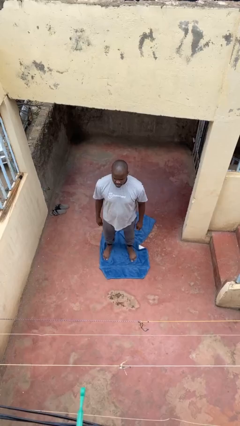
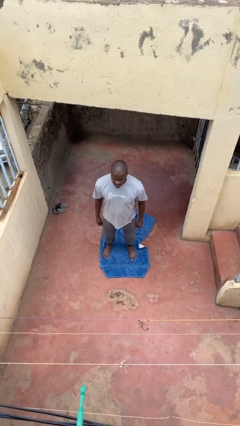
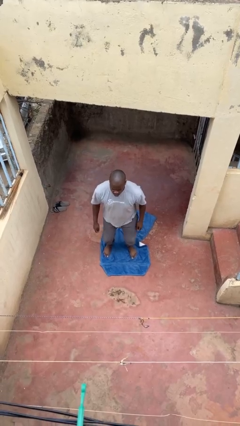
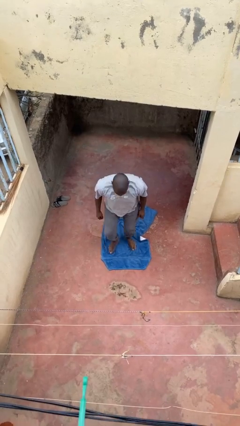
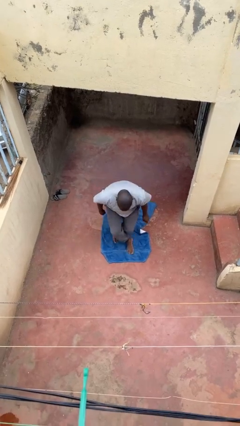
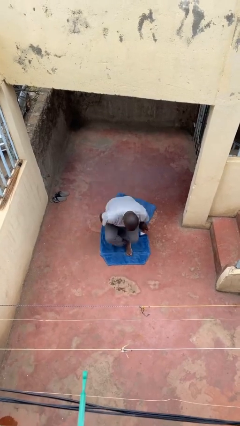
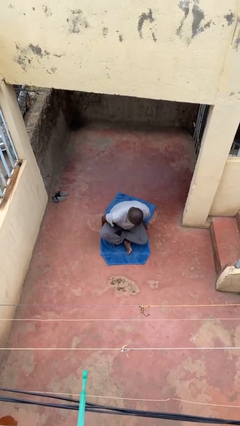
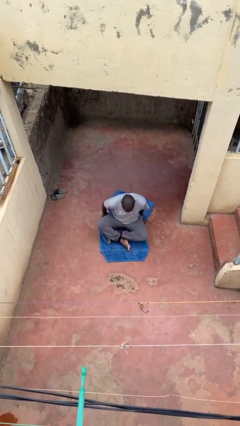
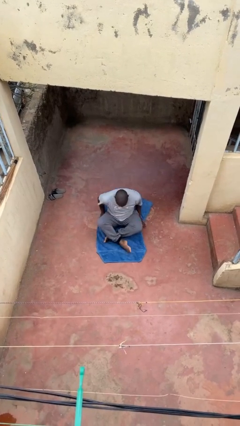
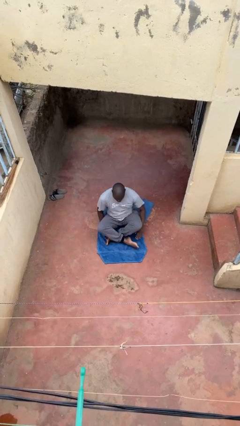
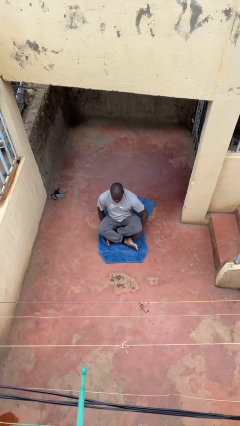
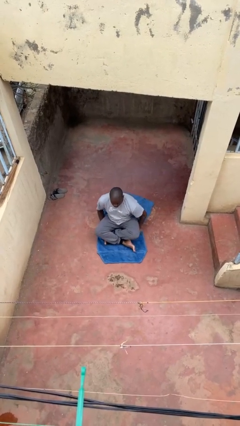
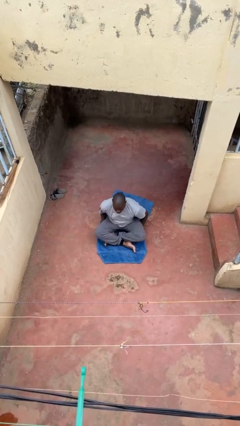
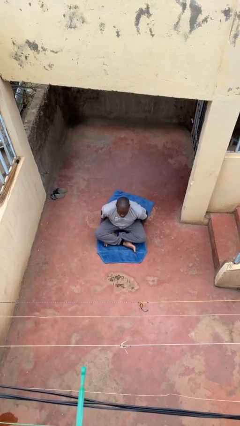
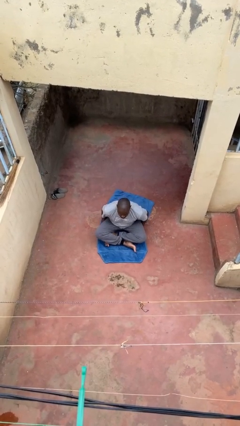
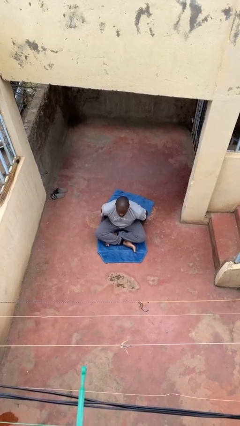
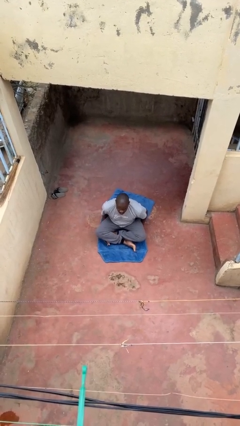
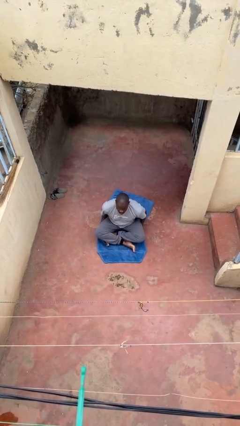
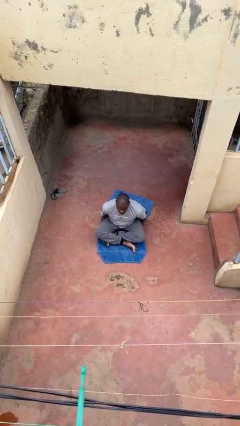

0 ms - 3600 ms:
person sits crisscross

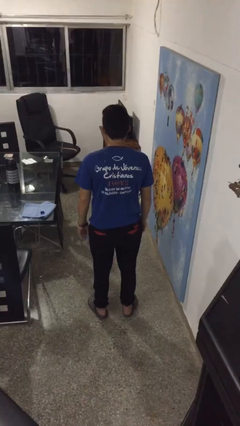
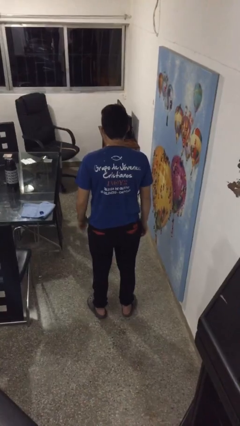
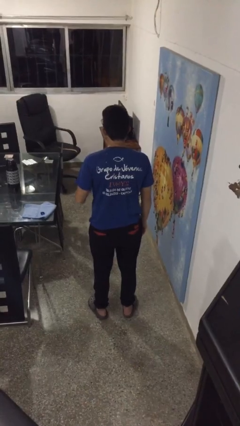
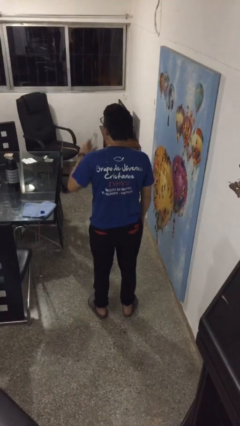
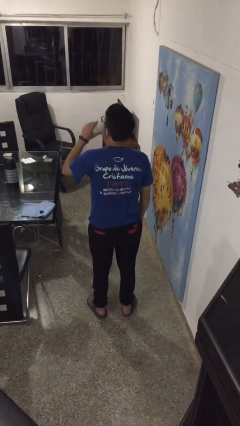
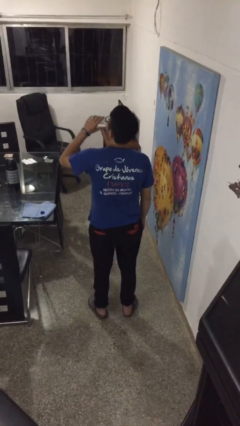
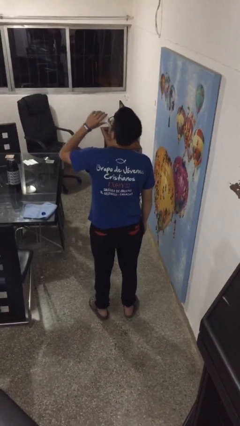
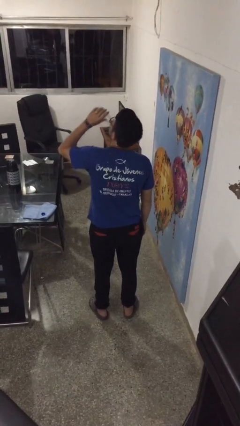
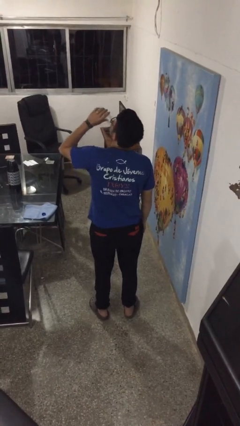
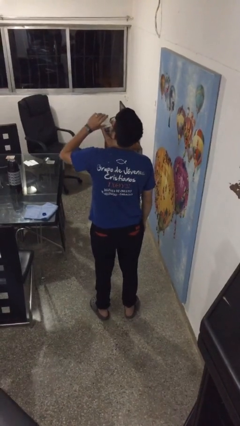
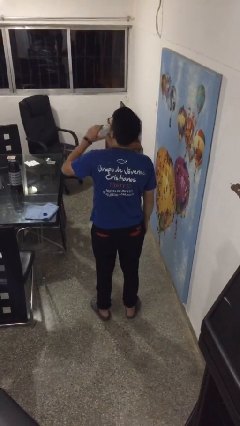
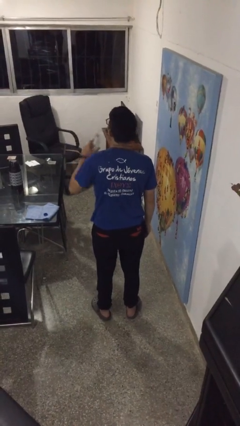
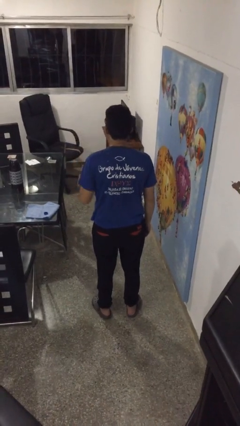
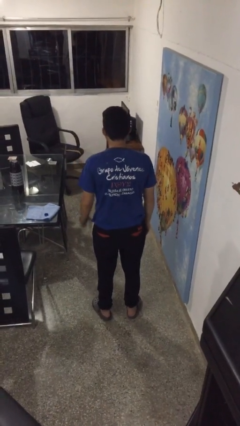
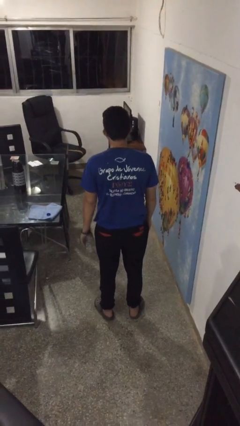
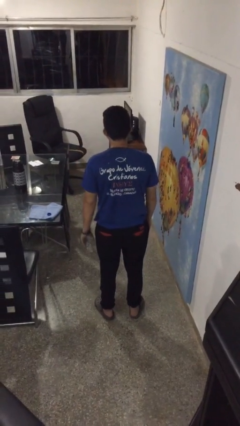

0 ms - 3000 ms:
person drinks from bottle

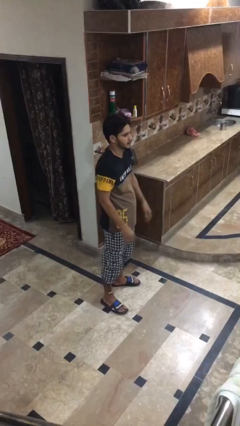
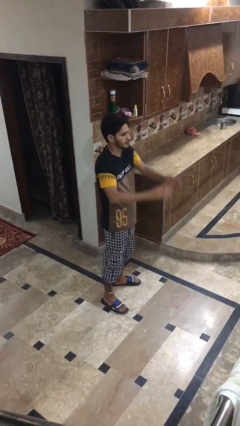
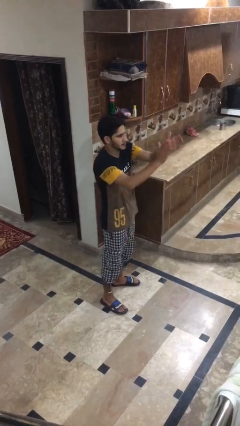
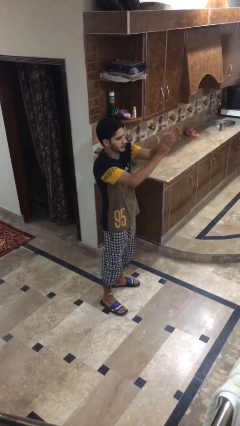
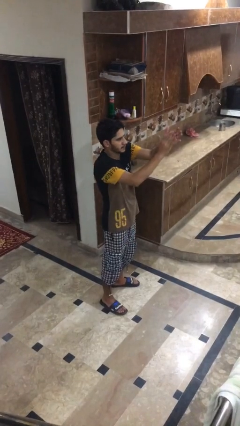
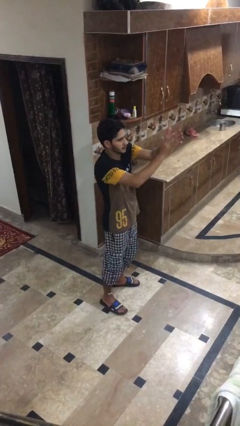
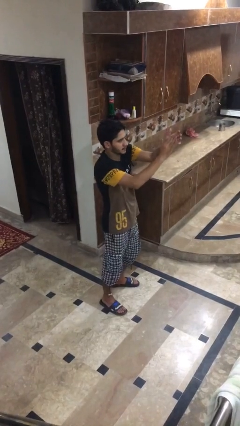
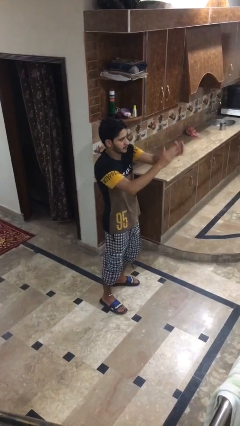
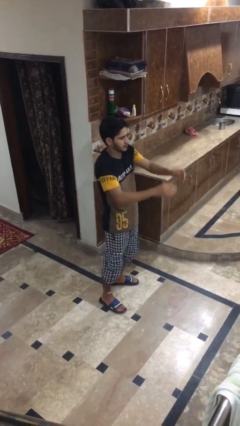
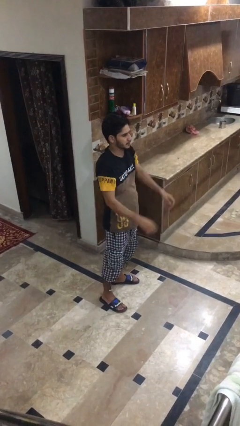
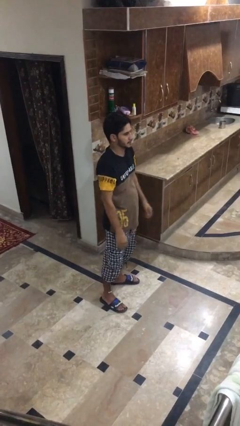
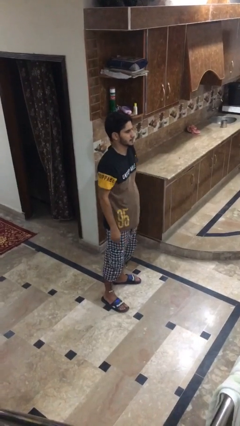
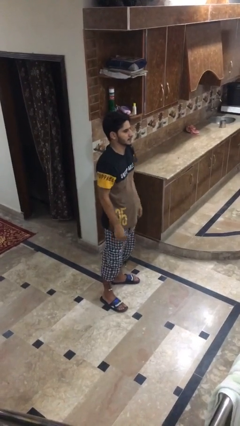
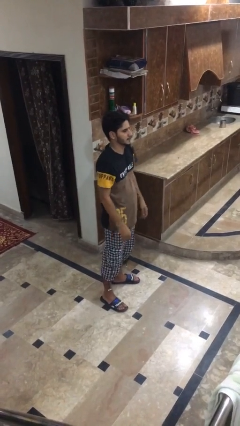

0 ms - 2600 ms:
person claps hands

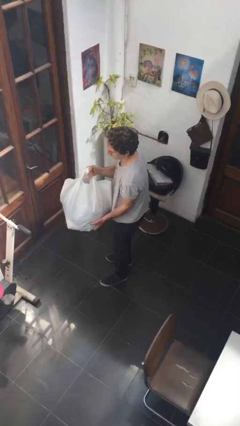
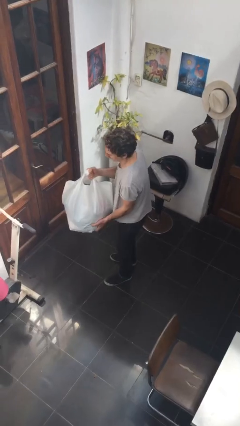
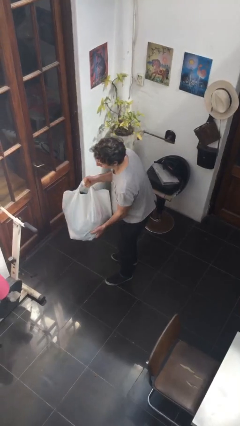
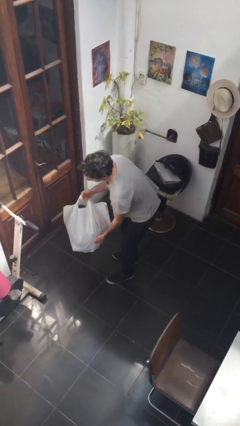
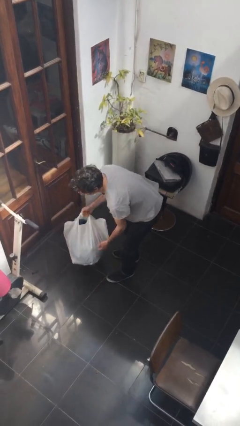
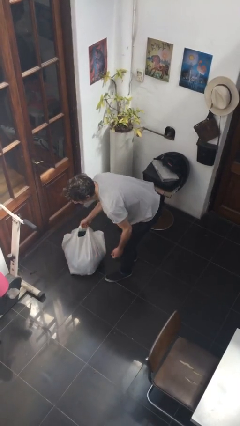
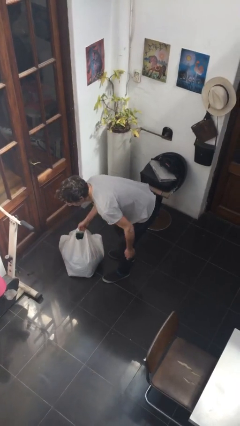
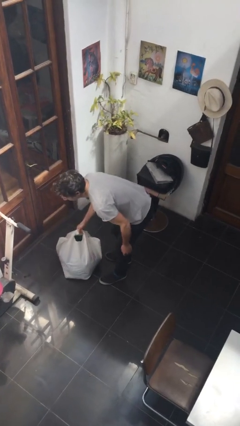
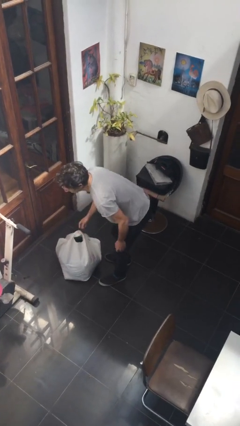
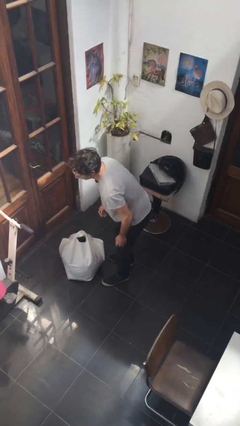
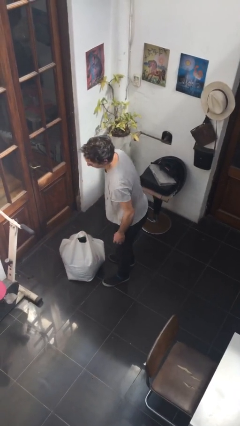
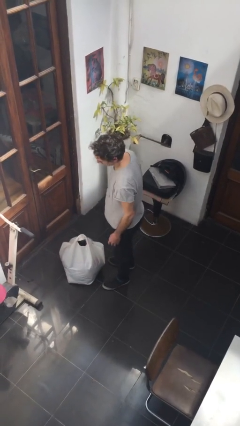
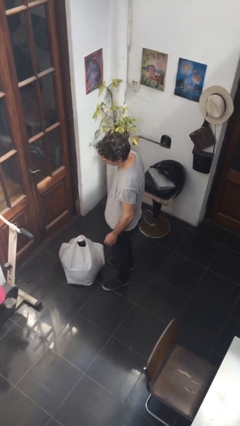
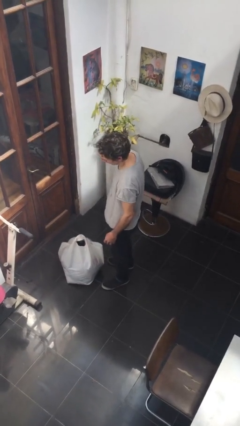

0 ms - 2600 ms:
person puts down object on floor

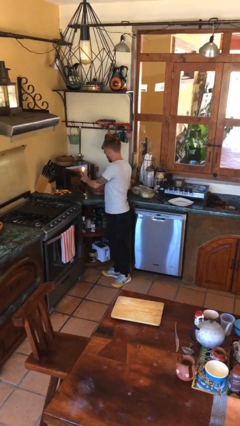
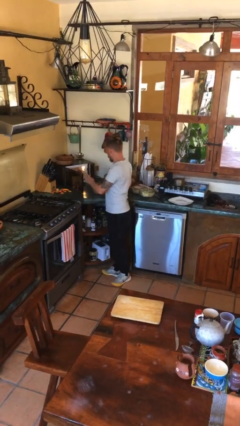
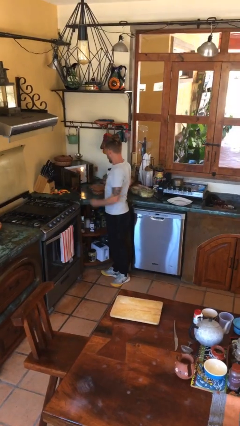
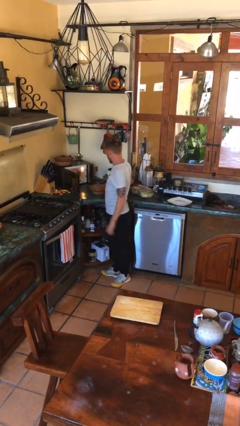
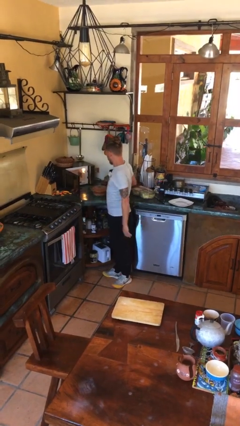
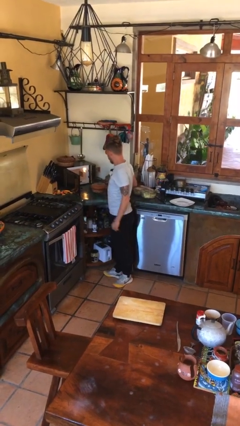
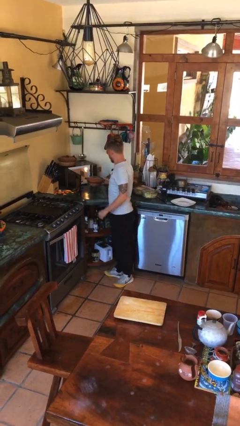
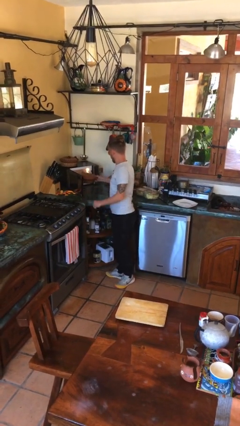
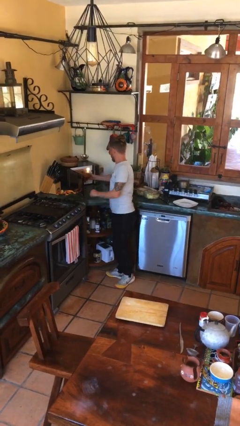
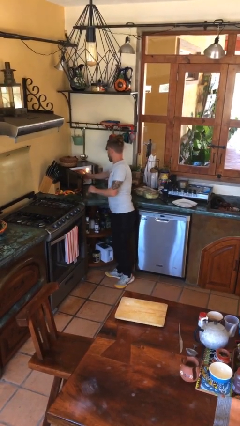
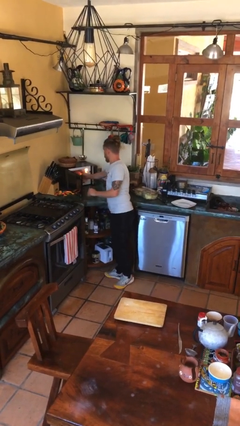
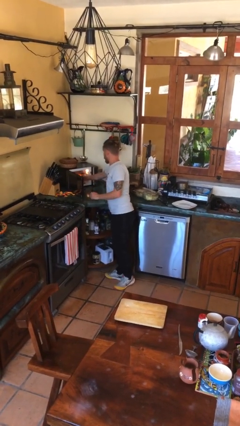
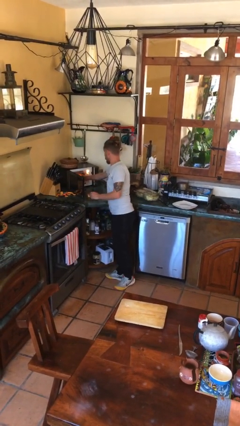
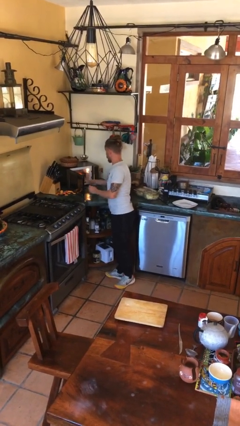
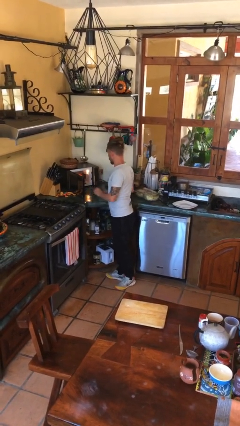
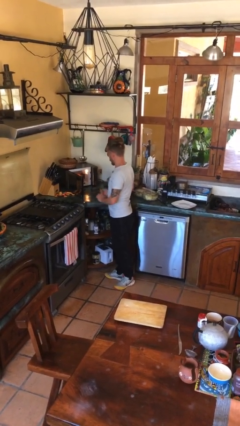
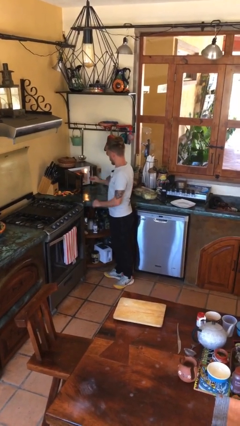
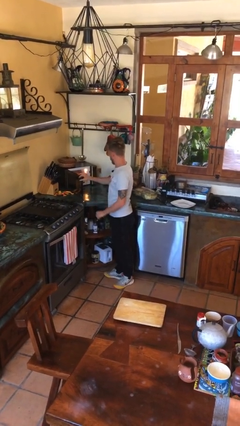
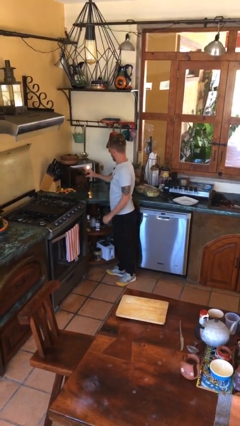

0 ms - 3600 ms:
person puts object into microwave

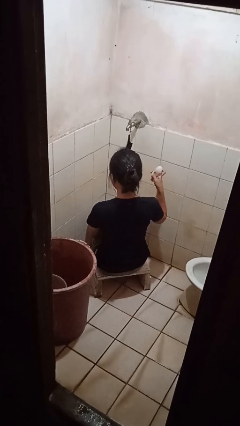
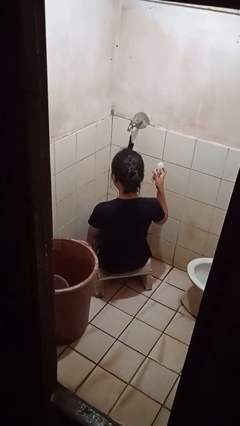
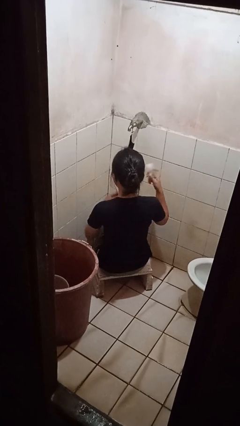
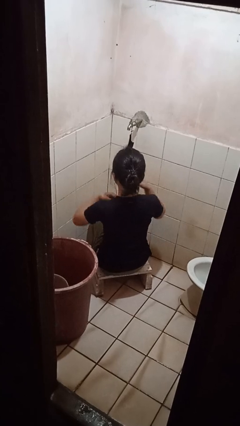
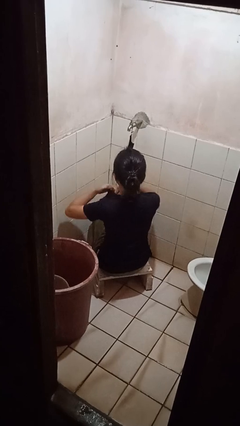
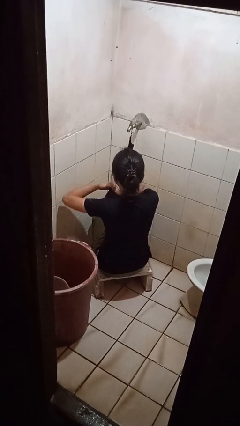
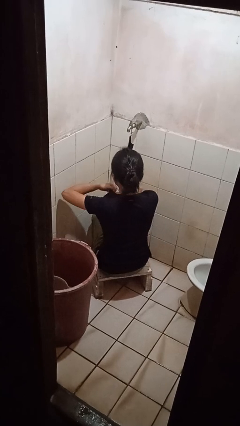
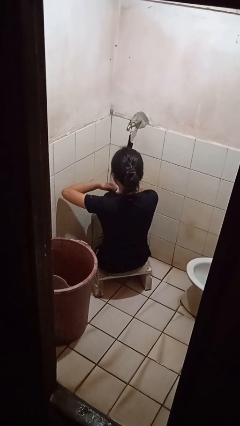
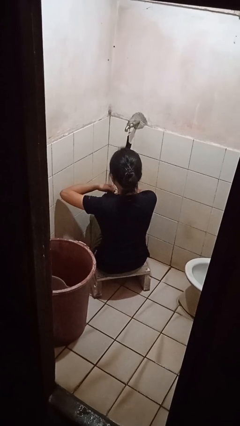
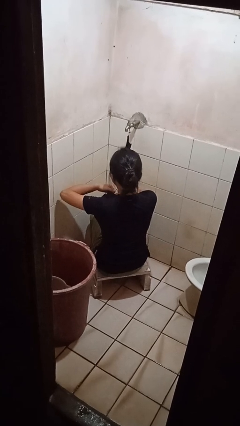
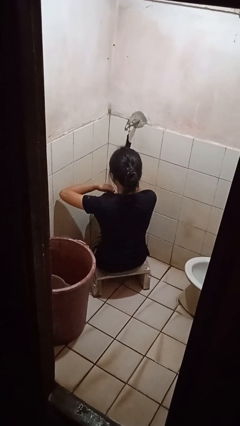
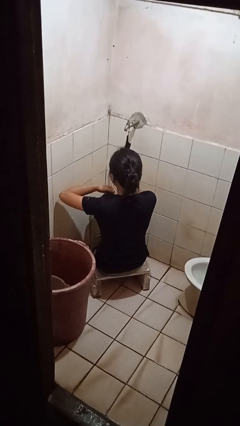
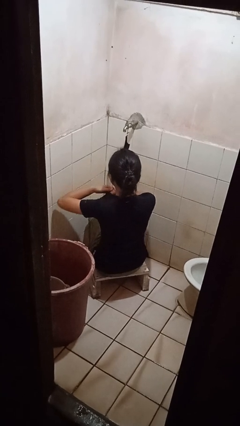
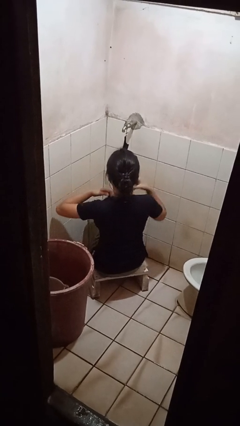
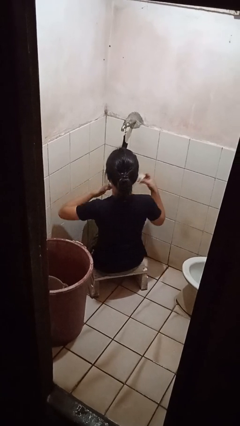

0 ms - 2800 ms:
person applies deodorant
